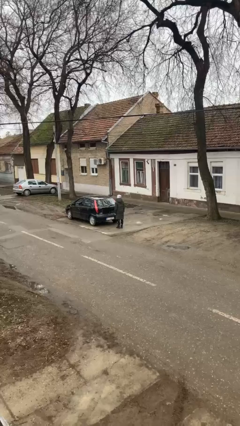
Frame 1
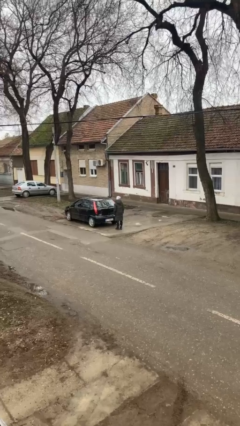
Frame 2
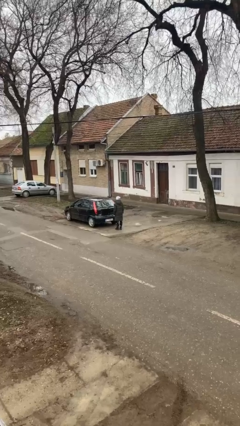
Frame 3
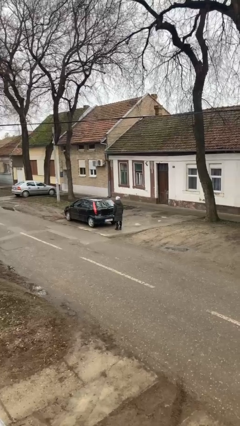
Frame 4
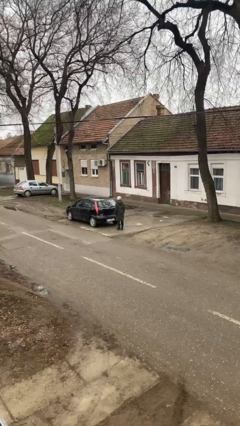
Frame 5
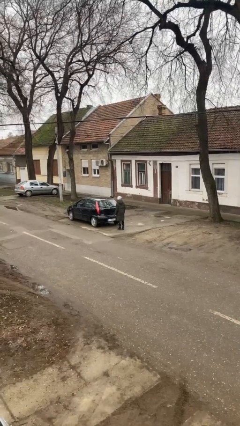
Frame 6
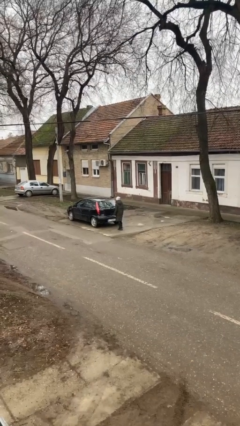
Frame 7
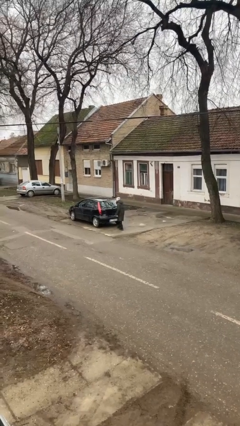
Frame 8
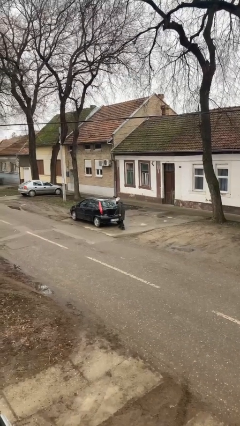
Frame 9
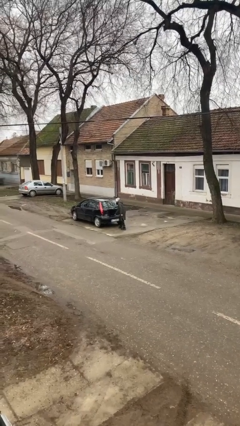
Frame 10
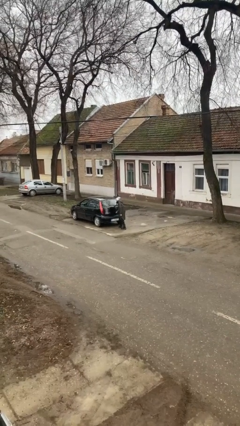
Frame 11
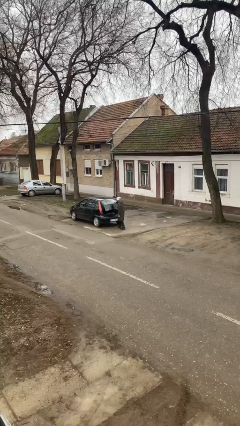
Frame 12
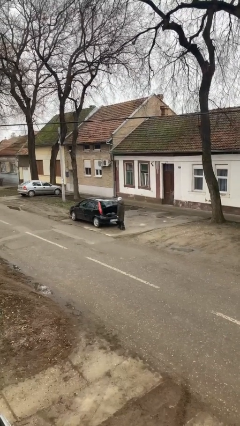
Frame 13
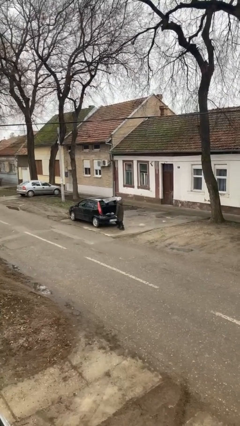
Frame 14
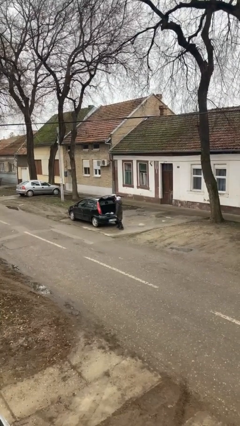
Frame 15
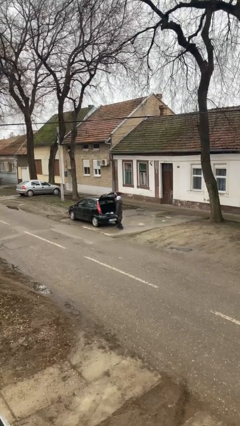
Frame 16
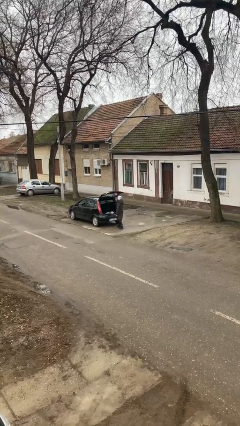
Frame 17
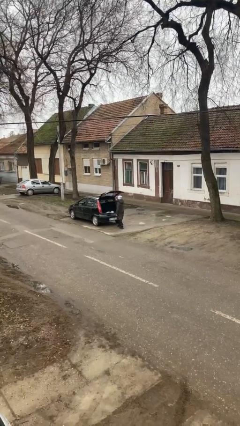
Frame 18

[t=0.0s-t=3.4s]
person opens car trunk

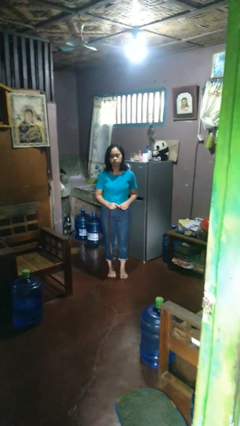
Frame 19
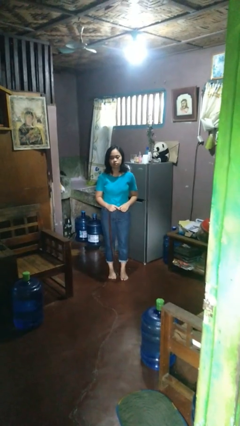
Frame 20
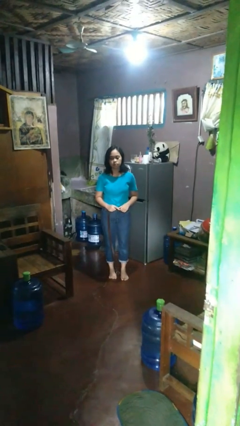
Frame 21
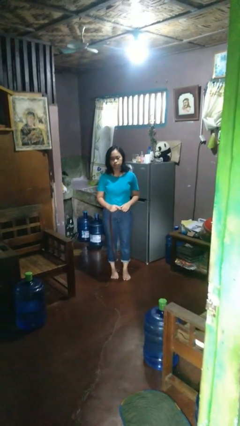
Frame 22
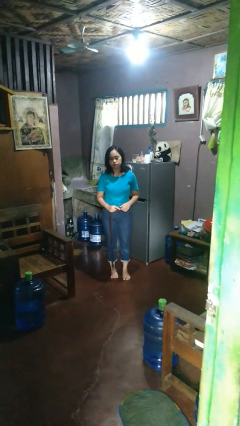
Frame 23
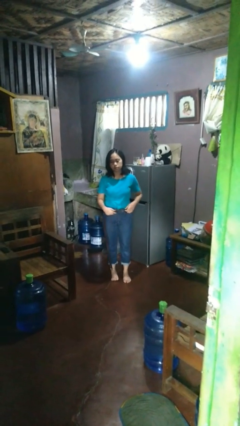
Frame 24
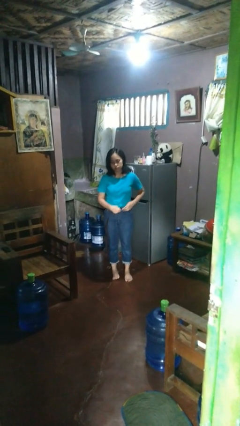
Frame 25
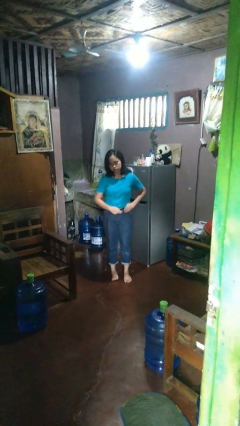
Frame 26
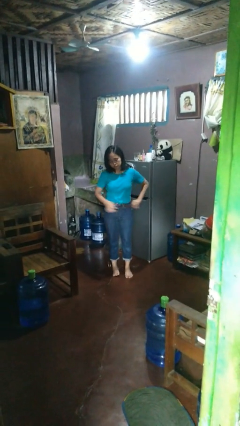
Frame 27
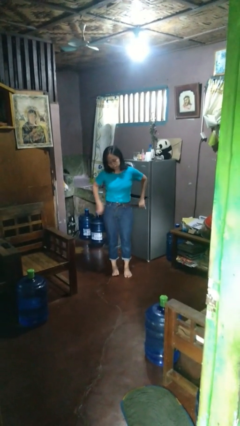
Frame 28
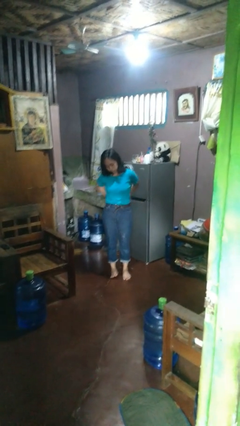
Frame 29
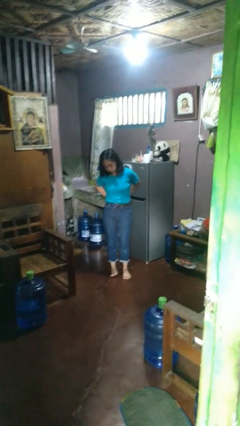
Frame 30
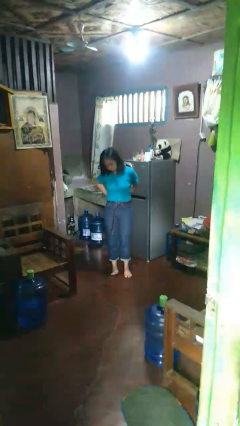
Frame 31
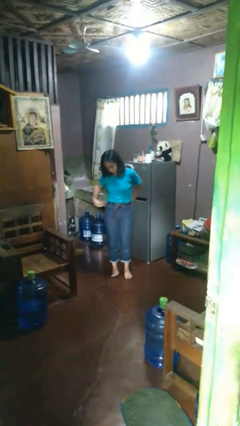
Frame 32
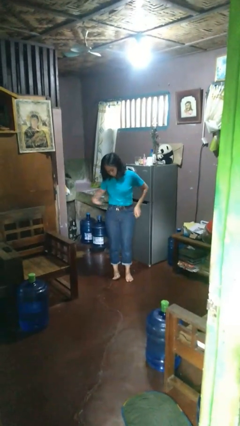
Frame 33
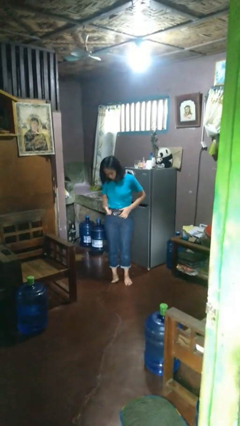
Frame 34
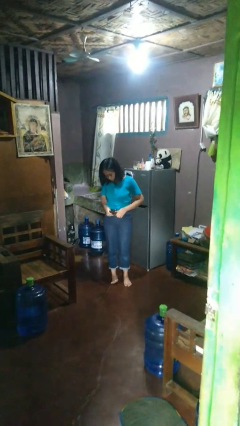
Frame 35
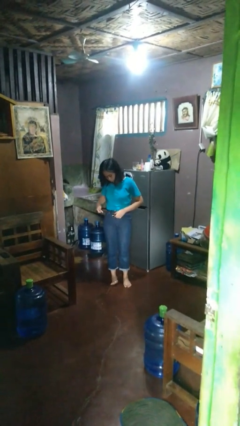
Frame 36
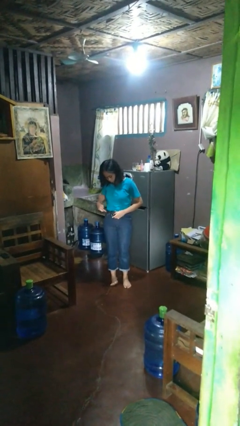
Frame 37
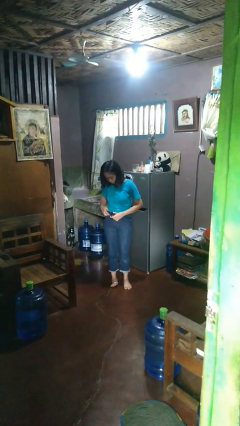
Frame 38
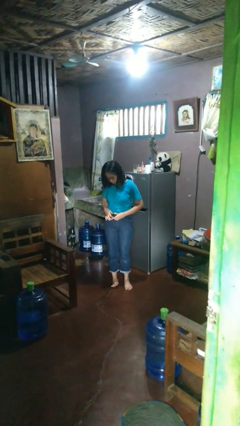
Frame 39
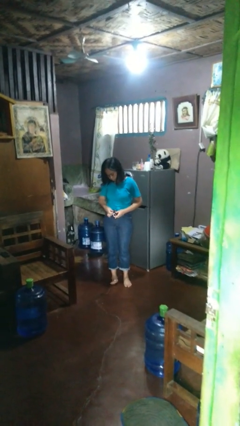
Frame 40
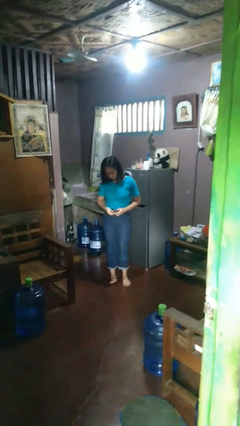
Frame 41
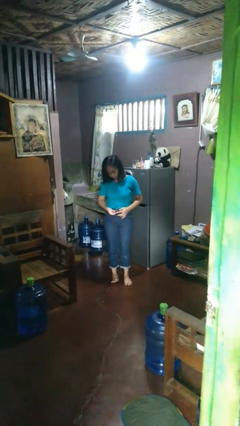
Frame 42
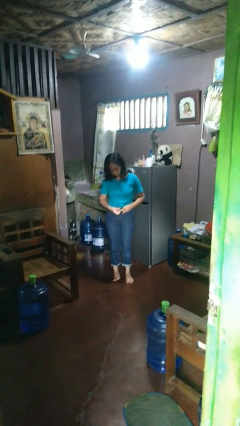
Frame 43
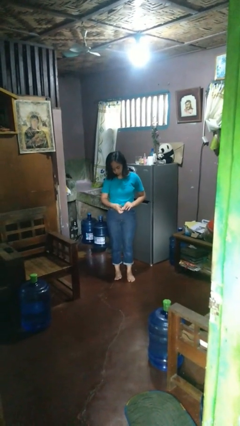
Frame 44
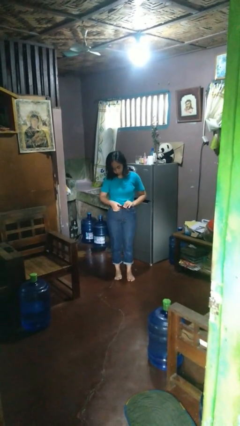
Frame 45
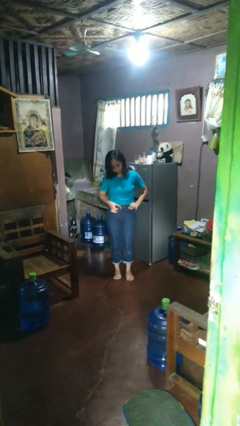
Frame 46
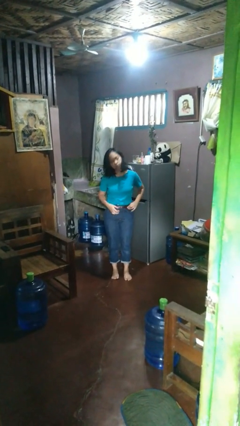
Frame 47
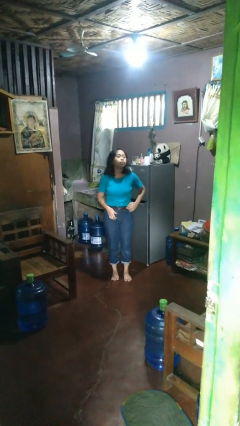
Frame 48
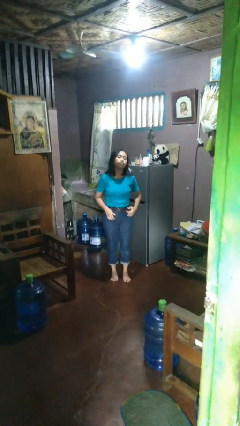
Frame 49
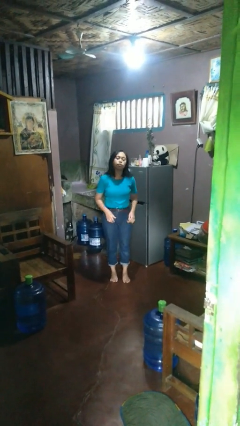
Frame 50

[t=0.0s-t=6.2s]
person puts on belt

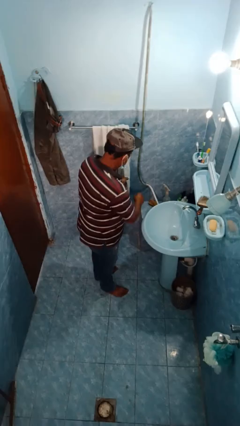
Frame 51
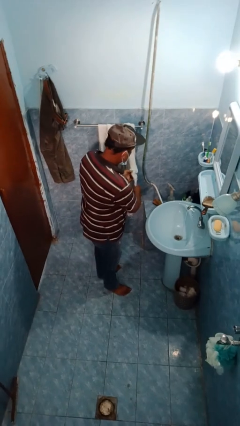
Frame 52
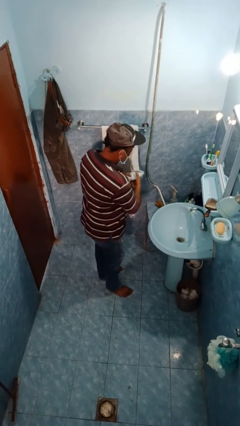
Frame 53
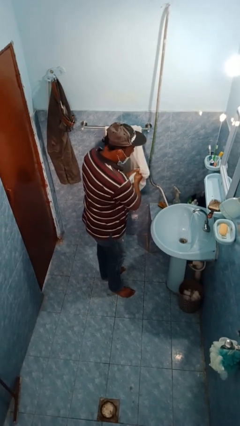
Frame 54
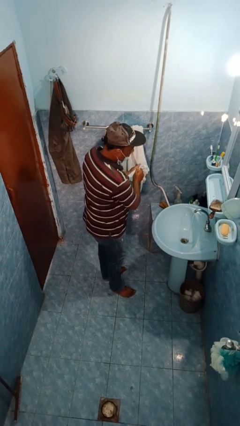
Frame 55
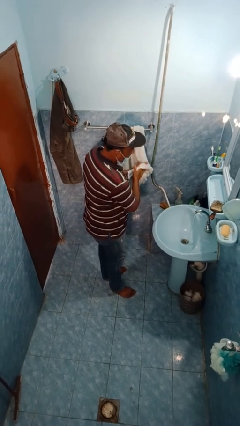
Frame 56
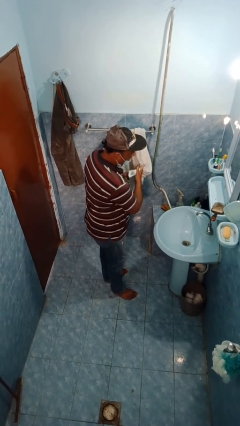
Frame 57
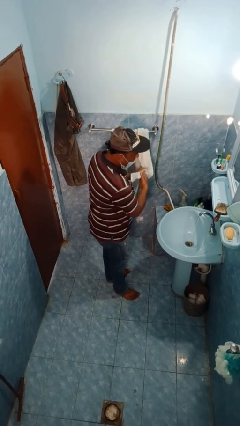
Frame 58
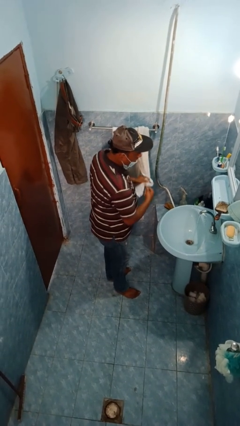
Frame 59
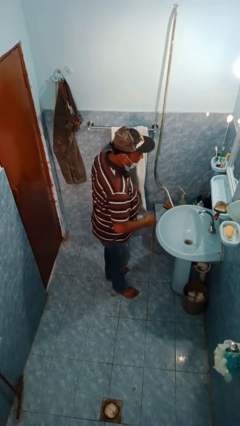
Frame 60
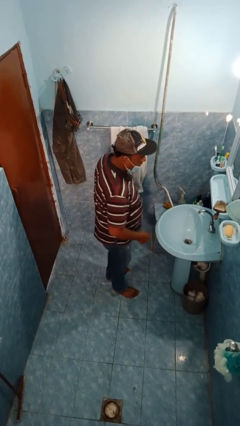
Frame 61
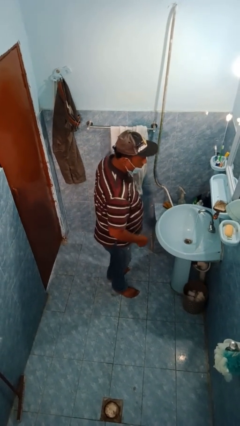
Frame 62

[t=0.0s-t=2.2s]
person dries hands with towel

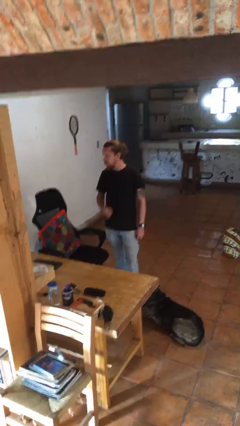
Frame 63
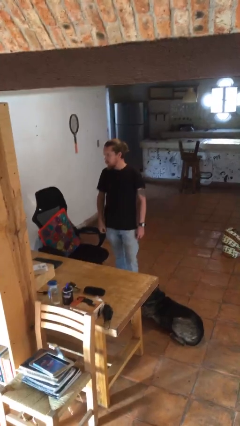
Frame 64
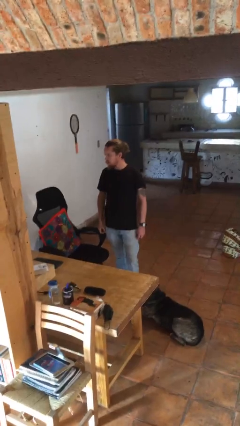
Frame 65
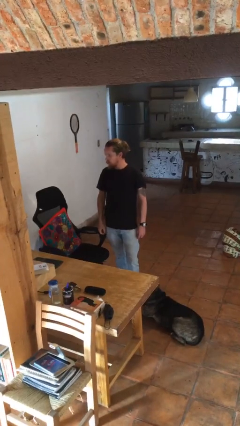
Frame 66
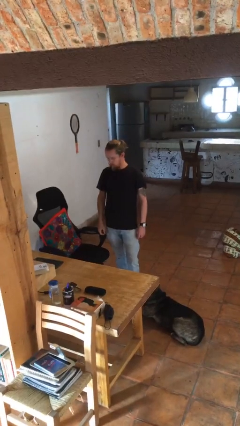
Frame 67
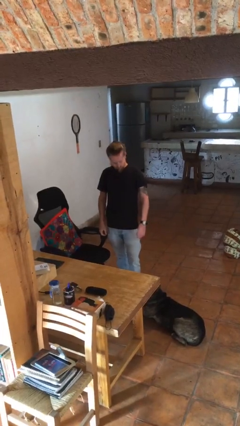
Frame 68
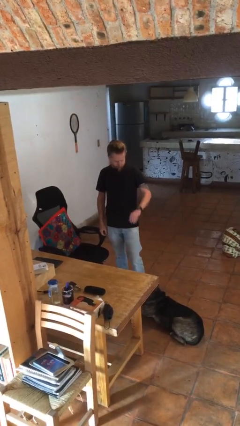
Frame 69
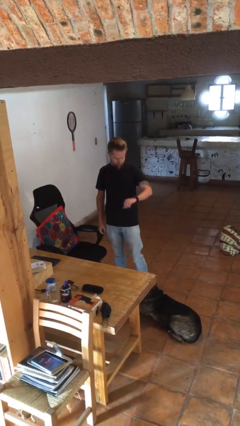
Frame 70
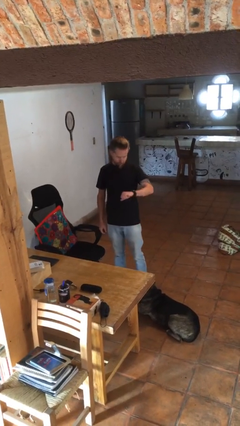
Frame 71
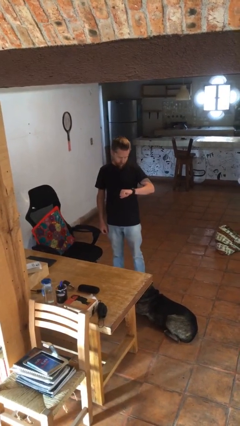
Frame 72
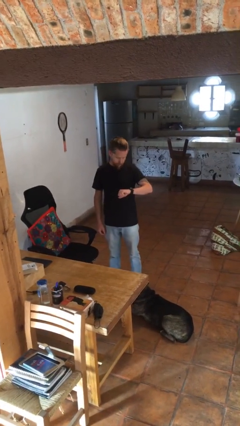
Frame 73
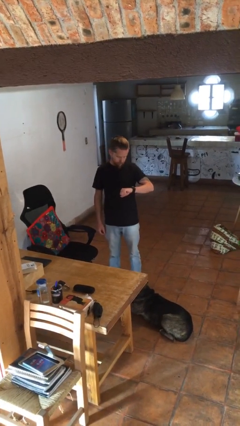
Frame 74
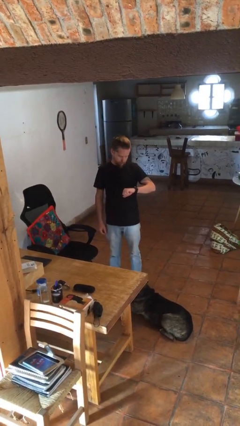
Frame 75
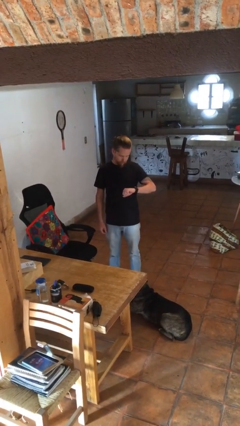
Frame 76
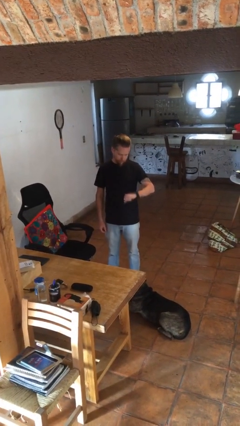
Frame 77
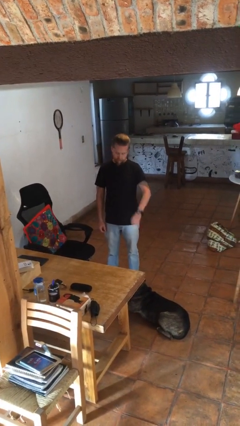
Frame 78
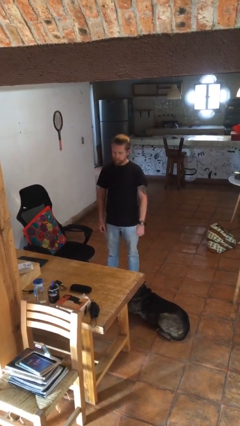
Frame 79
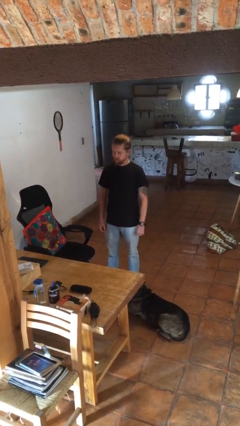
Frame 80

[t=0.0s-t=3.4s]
person looks at wristwatch

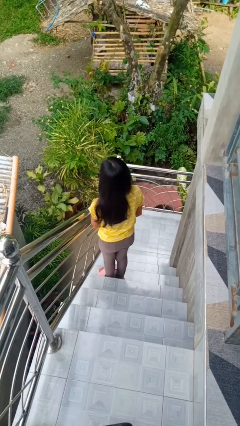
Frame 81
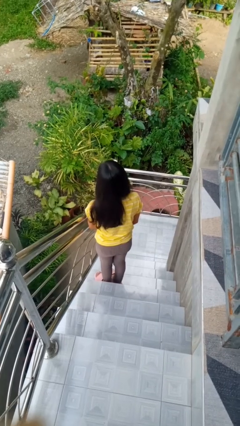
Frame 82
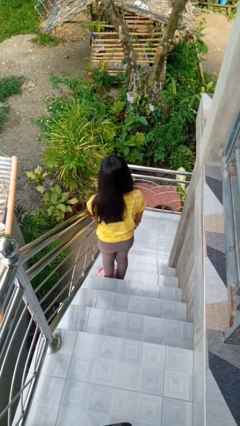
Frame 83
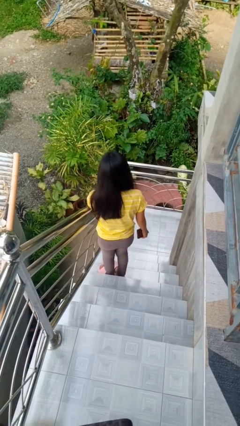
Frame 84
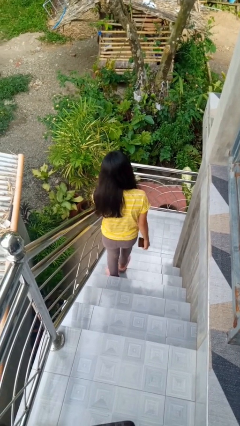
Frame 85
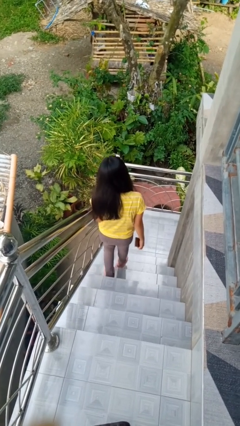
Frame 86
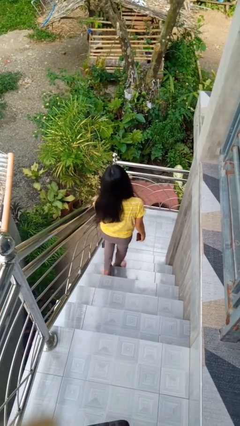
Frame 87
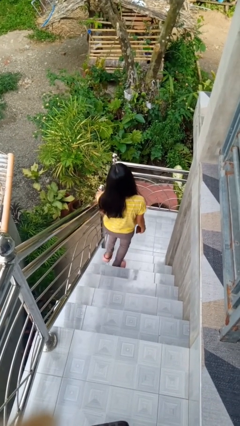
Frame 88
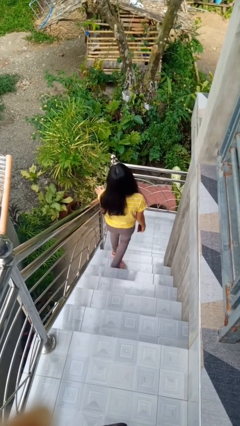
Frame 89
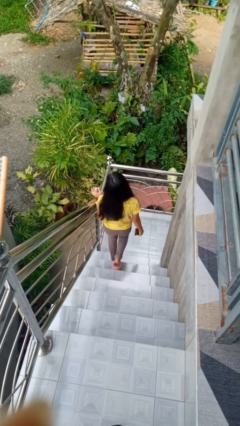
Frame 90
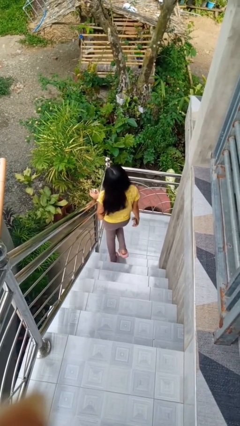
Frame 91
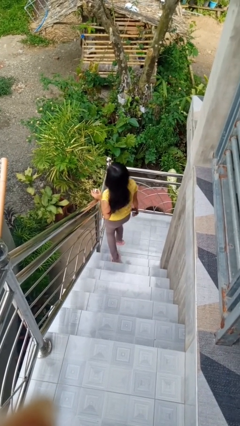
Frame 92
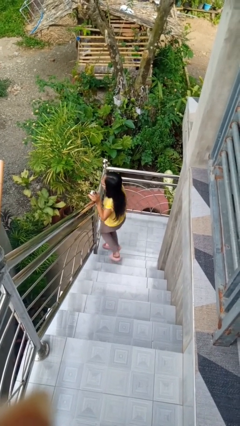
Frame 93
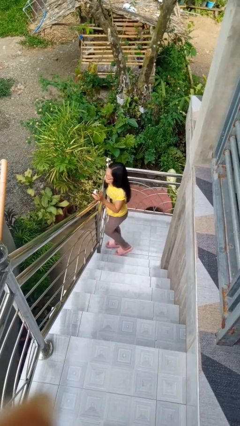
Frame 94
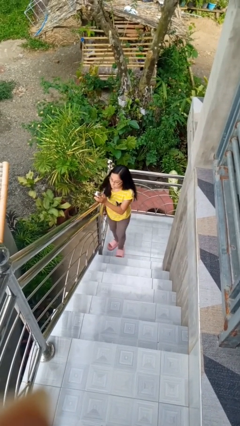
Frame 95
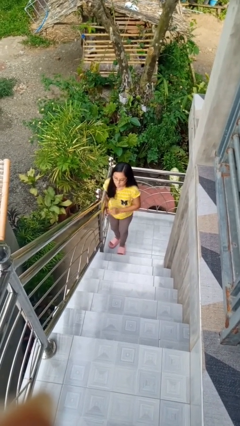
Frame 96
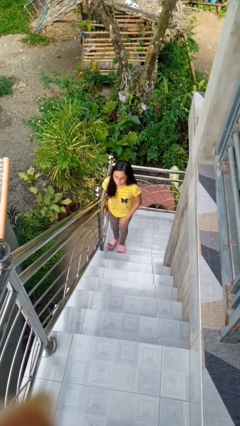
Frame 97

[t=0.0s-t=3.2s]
person climbs down stairs
